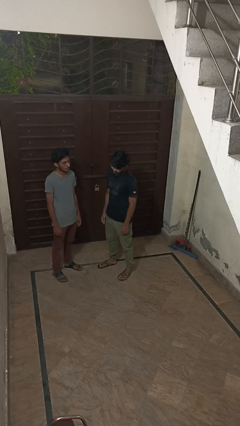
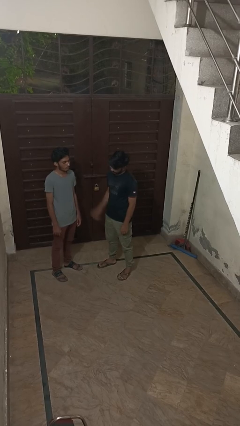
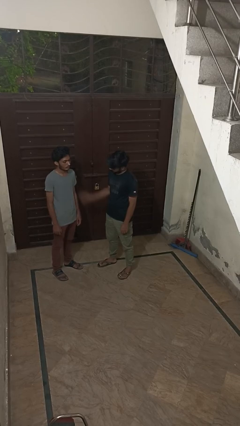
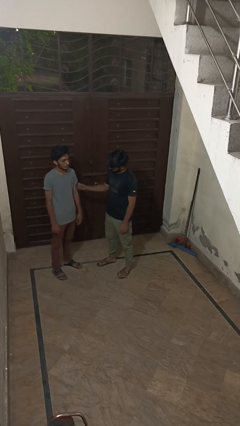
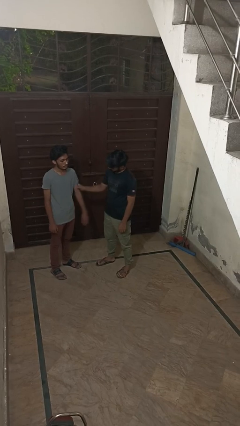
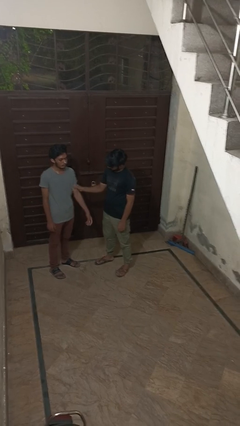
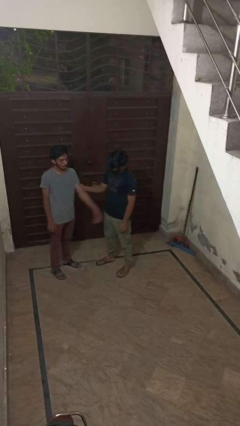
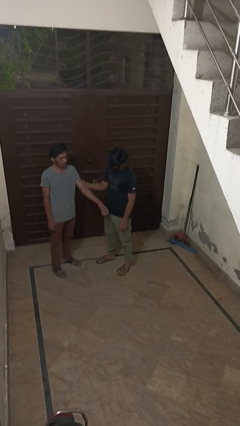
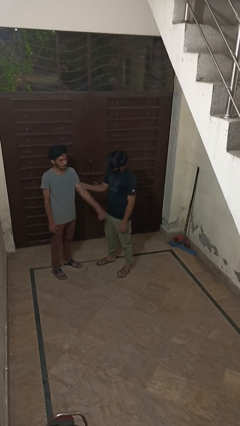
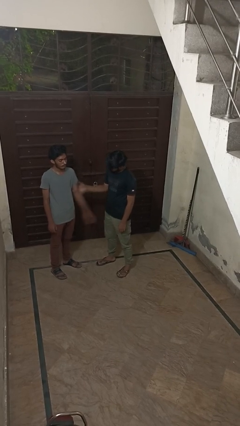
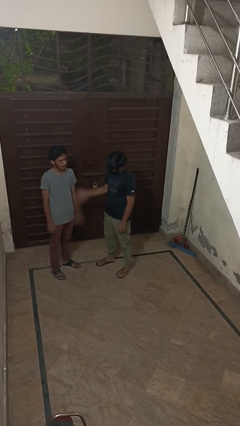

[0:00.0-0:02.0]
person grabs person by bicep

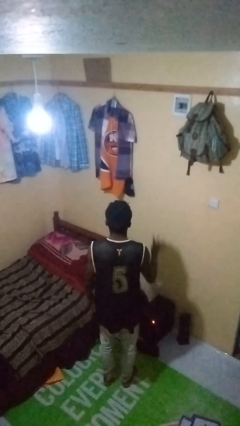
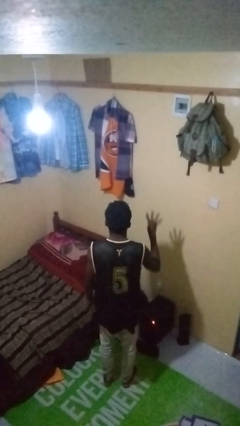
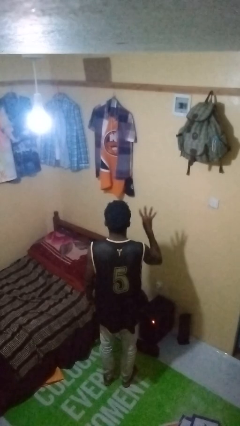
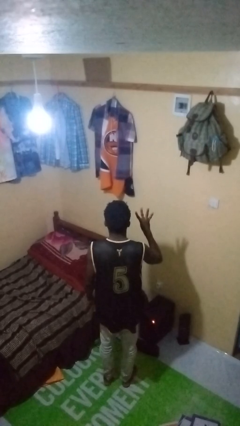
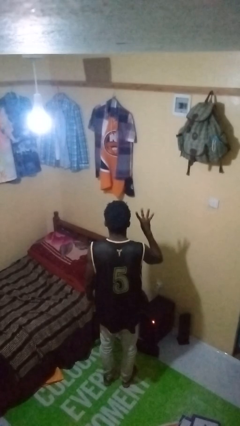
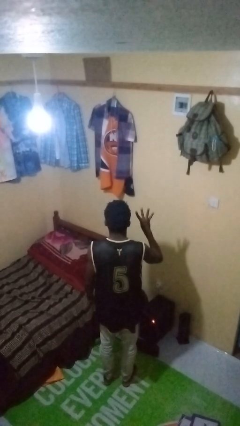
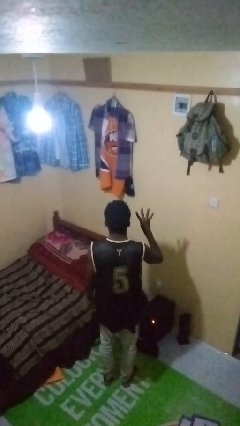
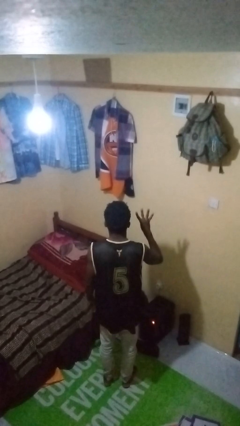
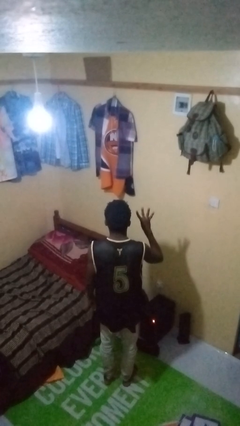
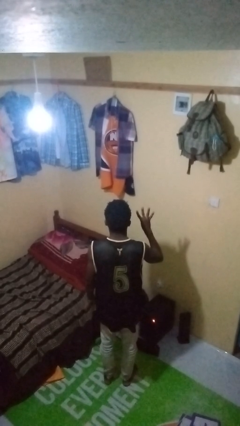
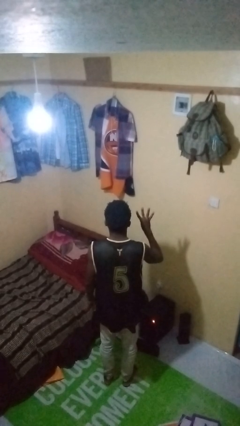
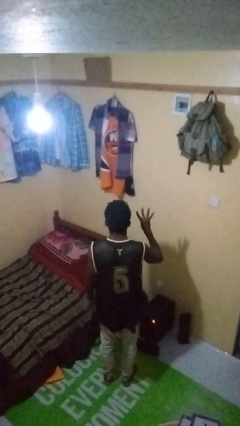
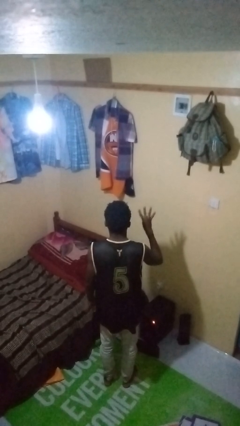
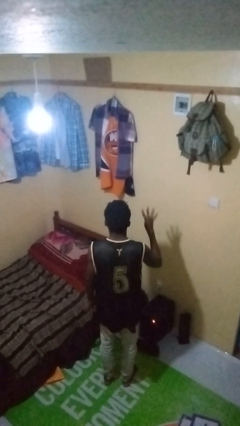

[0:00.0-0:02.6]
person gestures number four

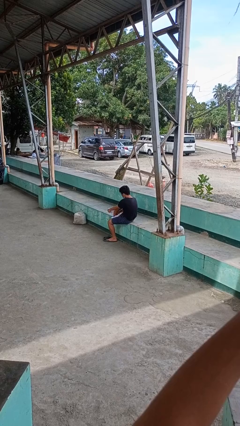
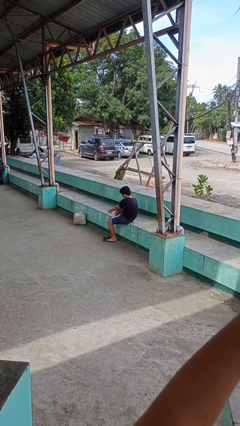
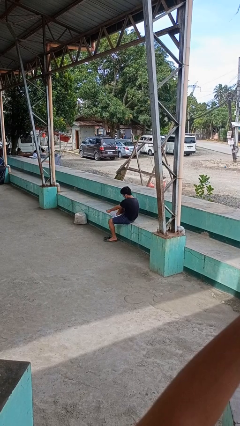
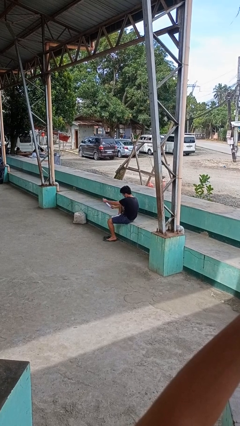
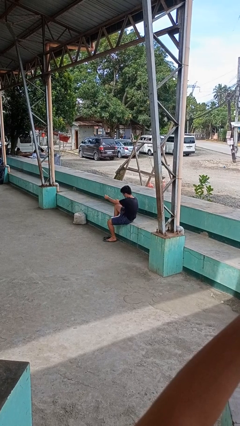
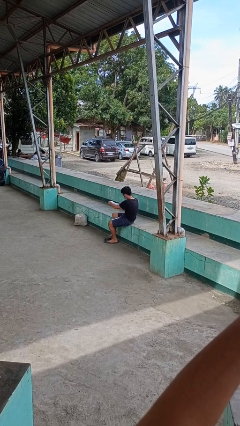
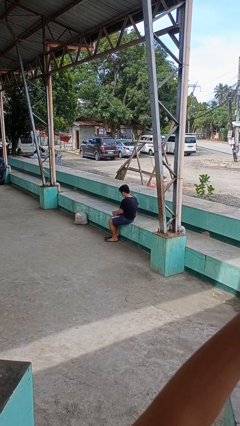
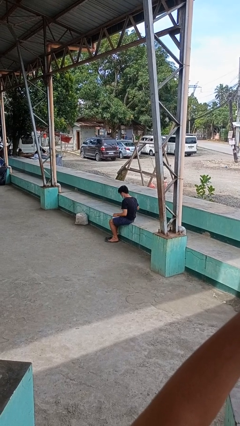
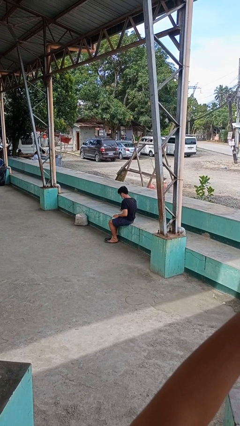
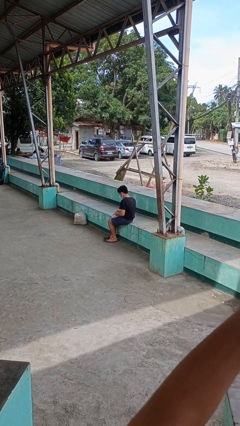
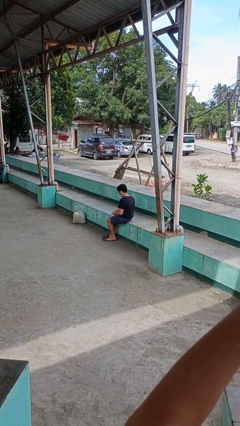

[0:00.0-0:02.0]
person takes off socks

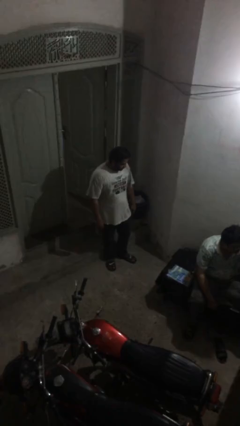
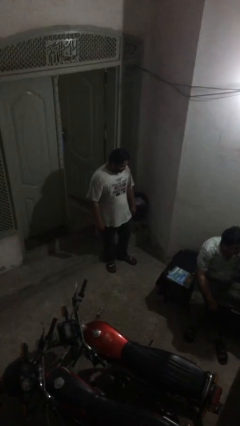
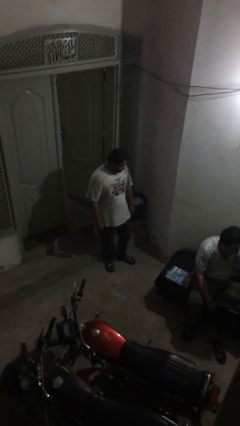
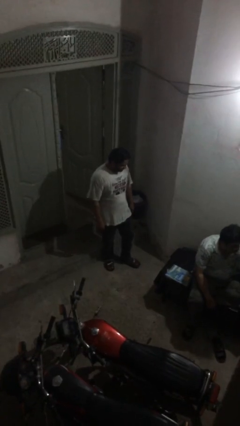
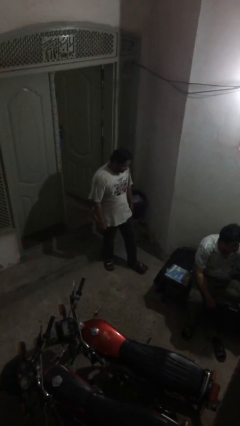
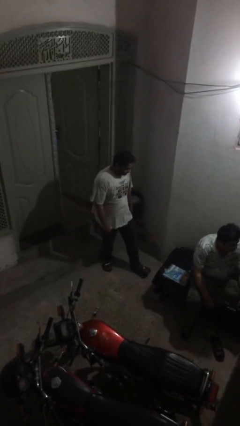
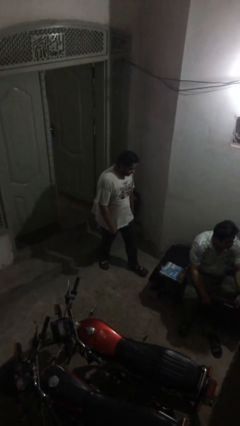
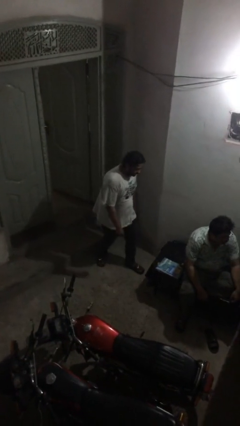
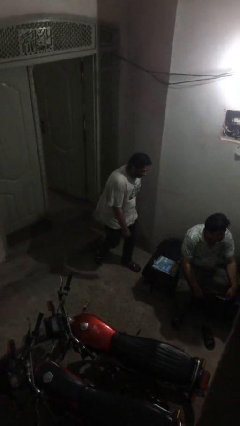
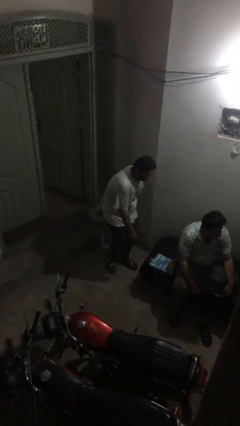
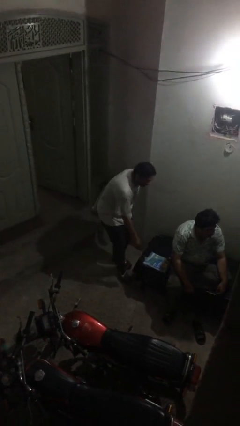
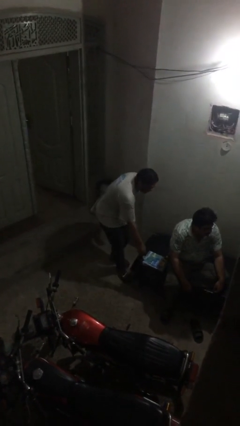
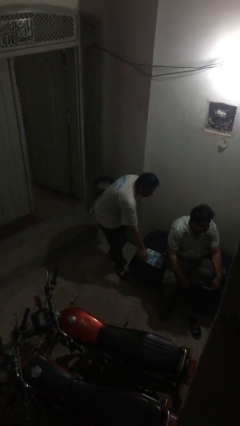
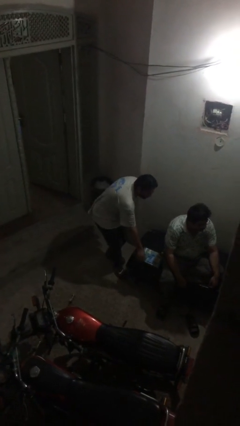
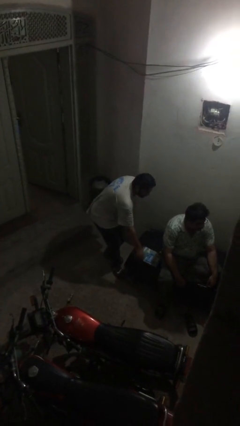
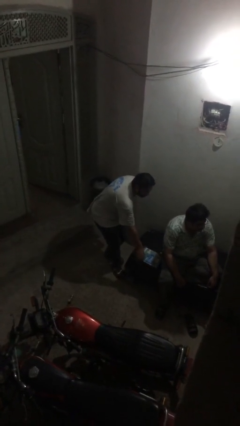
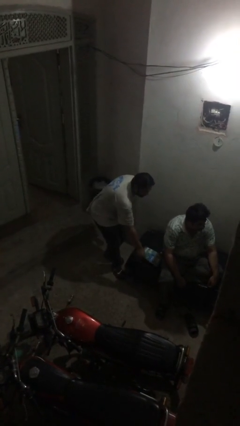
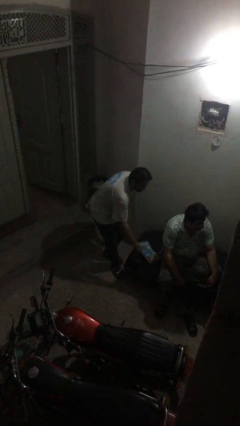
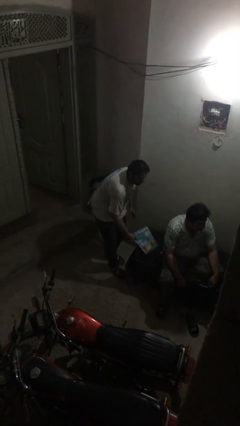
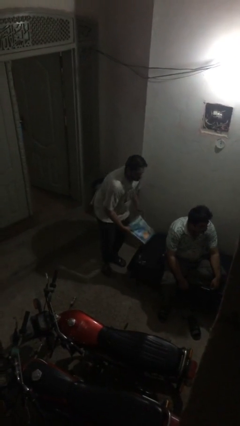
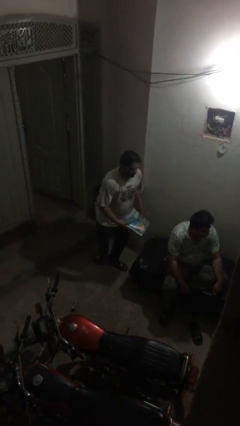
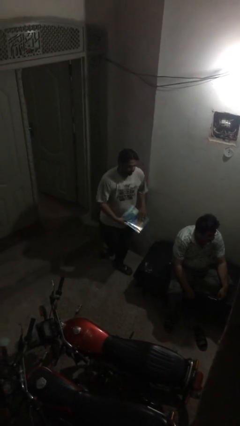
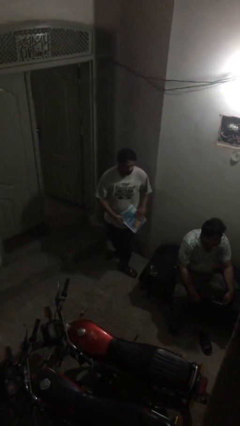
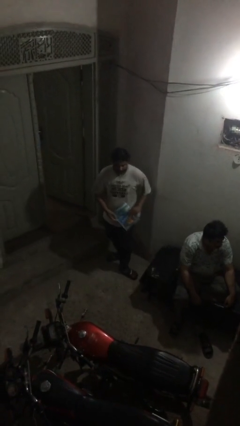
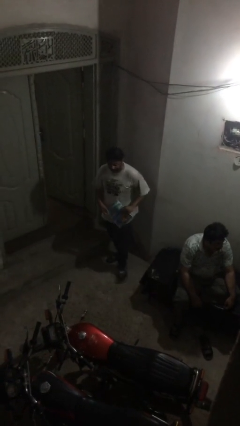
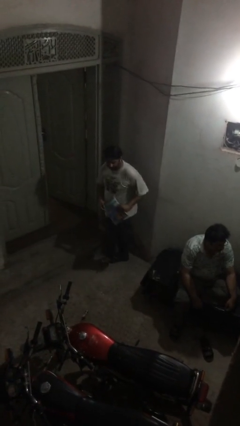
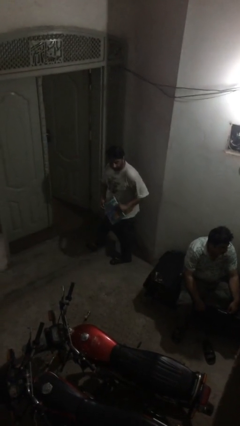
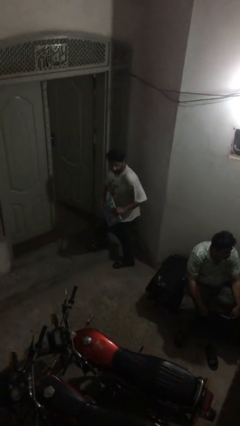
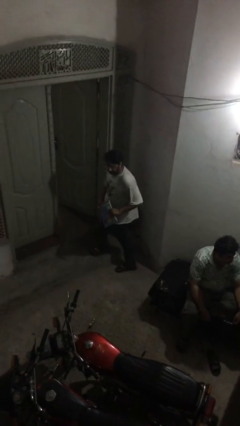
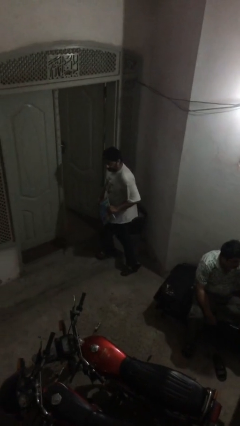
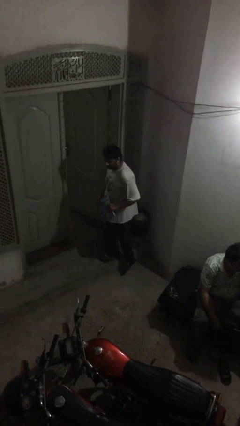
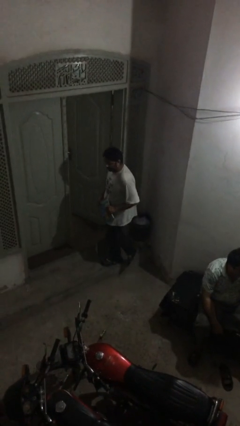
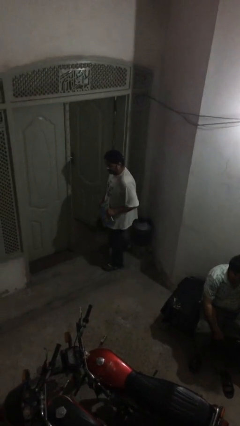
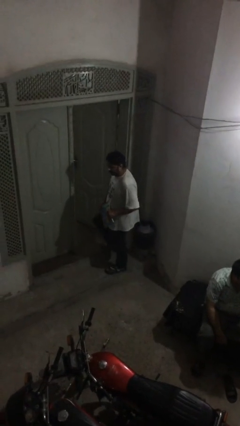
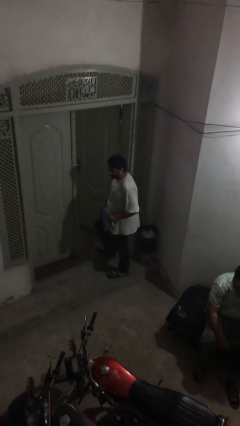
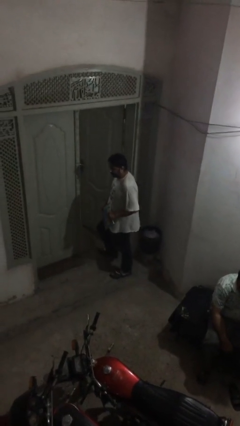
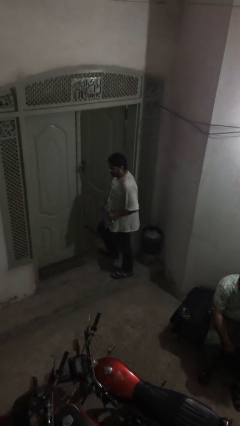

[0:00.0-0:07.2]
person steals object from person

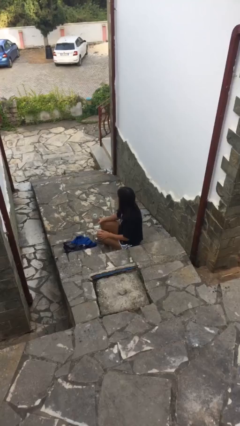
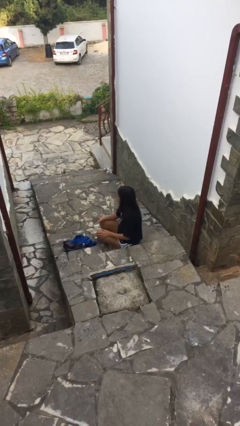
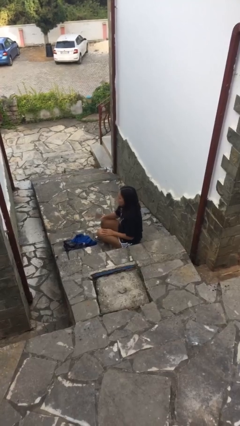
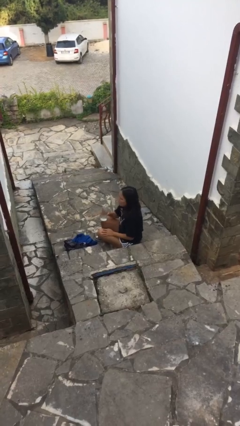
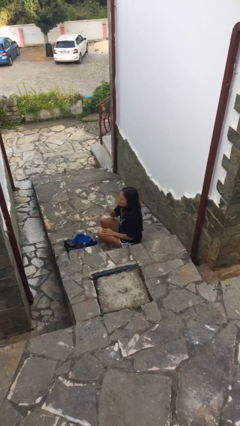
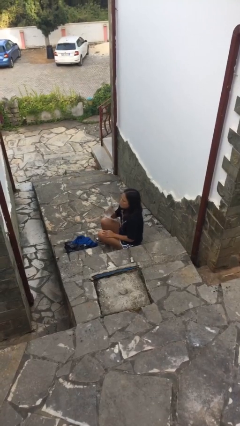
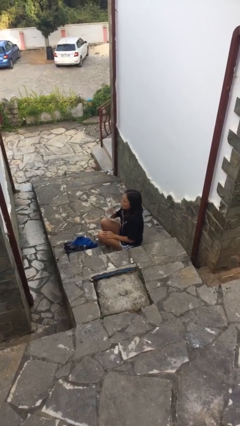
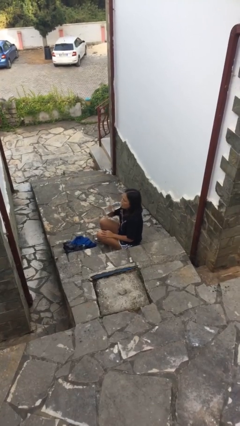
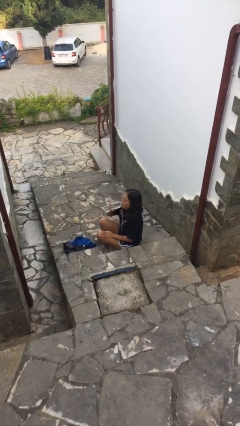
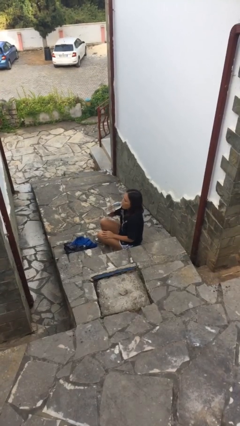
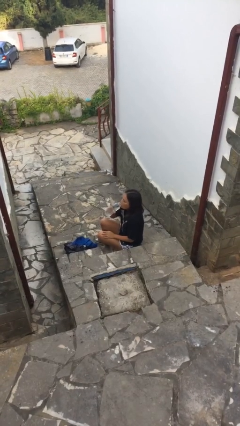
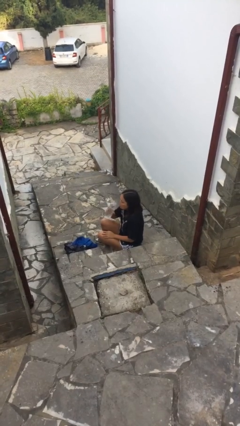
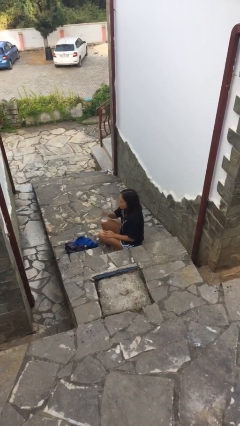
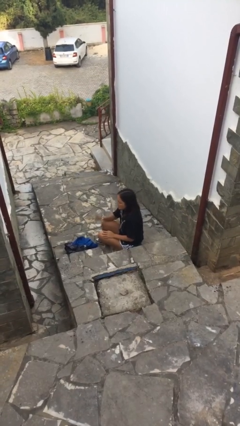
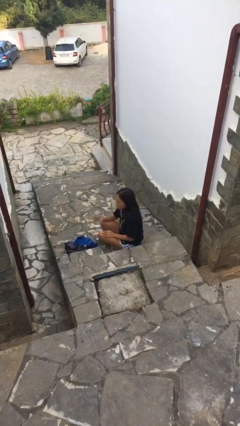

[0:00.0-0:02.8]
person drinks from bottle

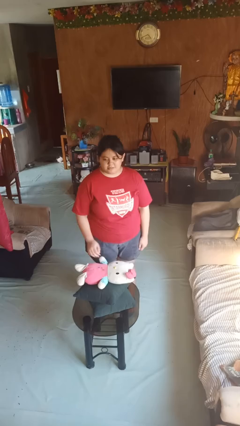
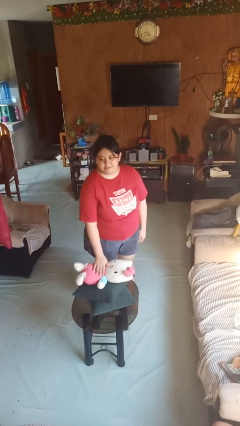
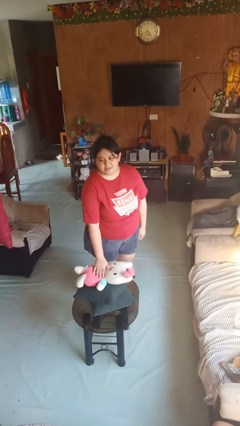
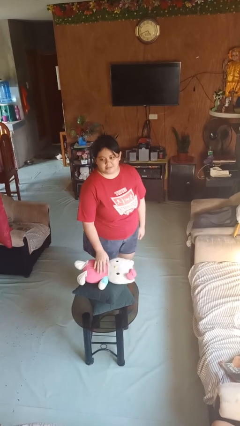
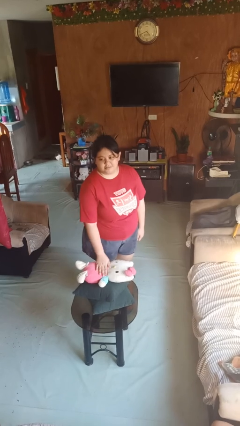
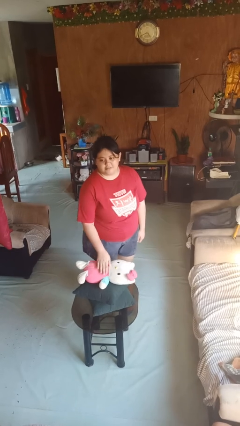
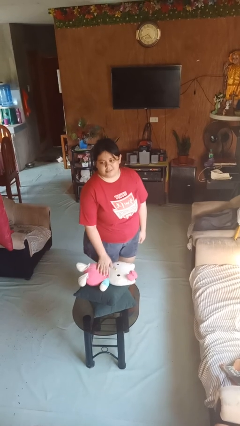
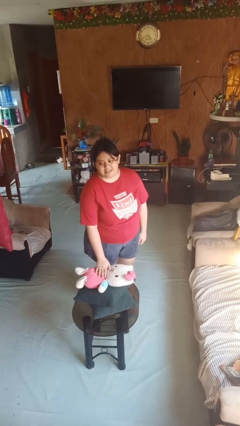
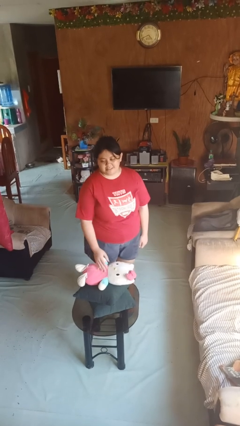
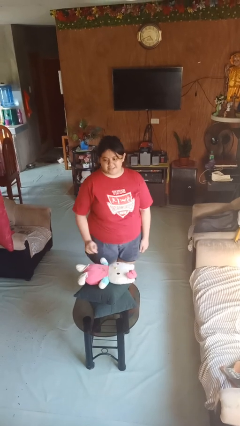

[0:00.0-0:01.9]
person taps object with finger
